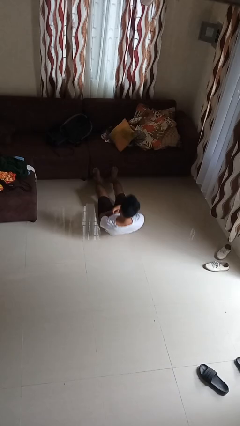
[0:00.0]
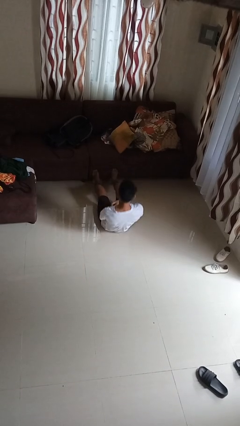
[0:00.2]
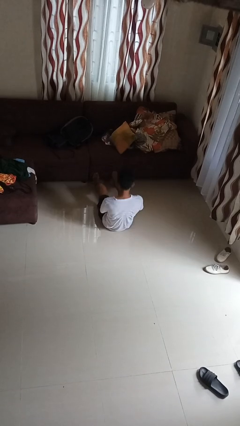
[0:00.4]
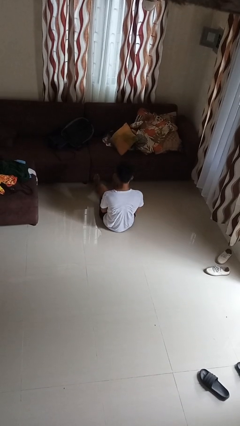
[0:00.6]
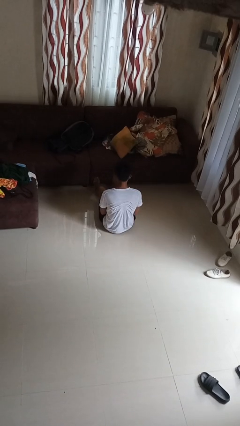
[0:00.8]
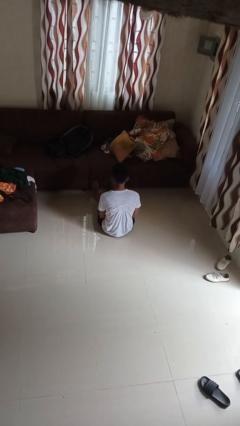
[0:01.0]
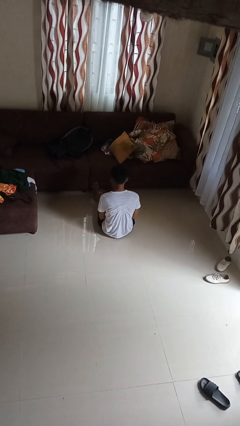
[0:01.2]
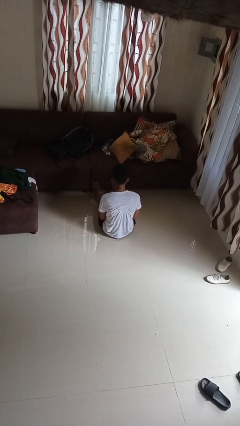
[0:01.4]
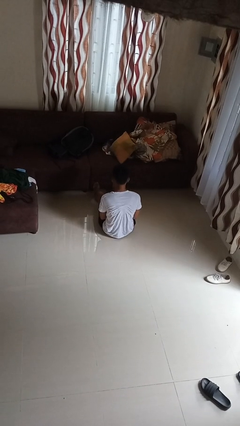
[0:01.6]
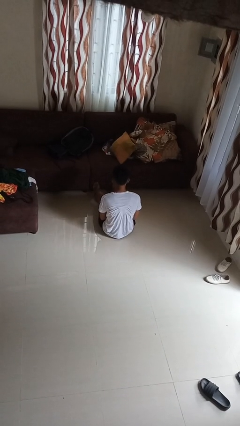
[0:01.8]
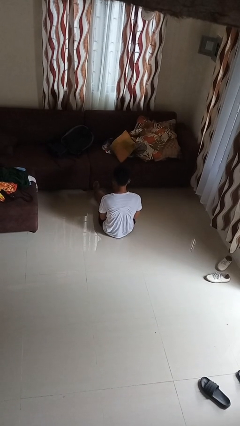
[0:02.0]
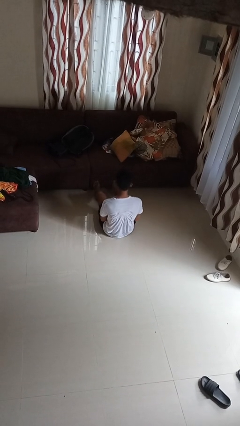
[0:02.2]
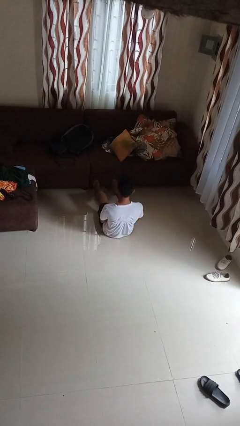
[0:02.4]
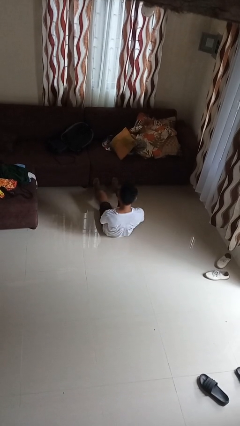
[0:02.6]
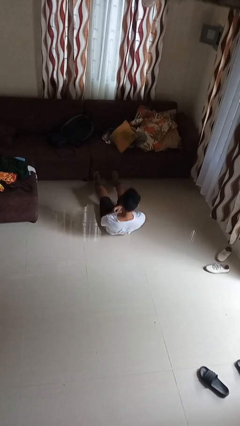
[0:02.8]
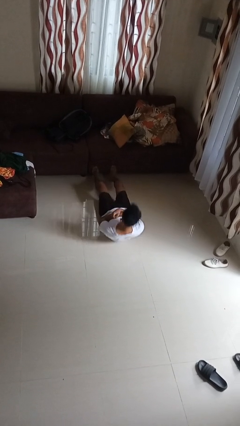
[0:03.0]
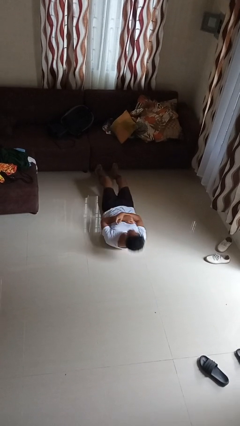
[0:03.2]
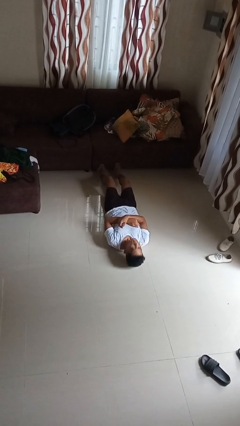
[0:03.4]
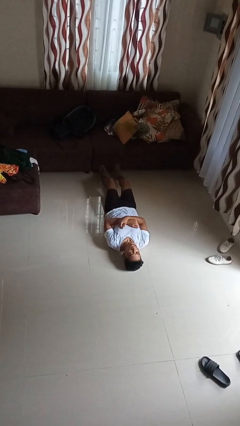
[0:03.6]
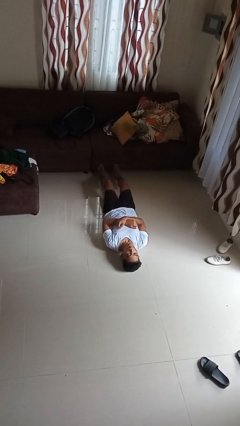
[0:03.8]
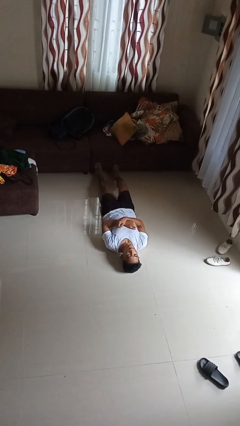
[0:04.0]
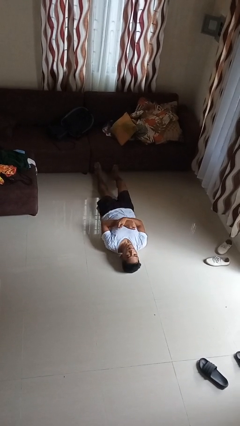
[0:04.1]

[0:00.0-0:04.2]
person exercises with situp

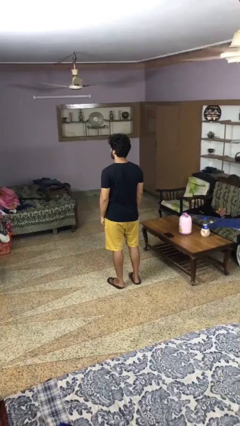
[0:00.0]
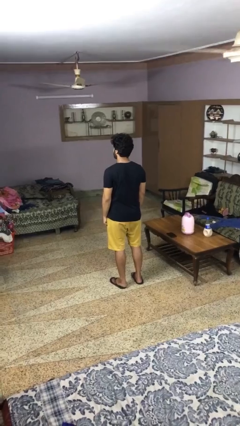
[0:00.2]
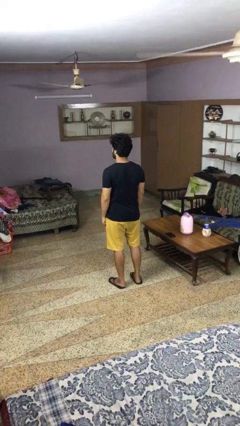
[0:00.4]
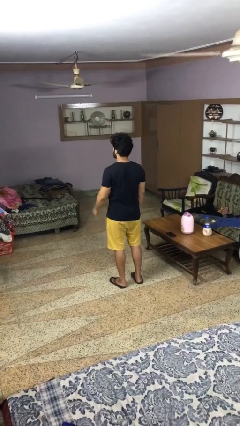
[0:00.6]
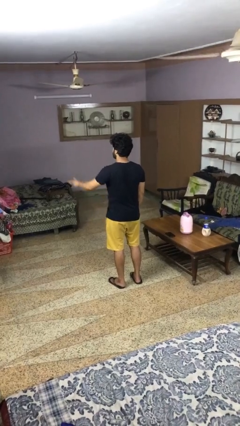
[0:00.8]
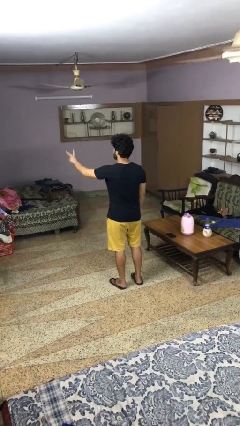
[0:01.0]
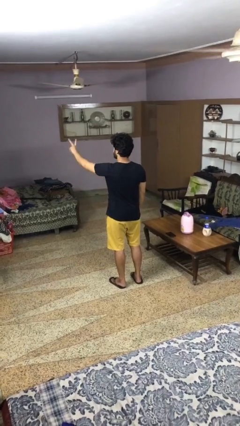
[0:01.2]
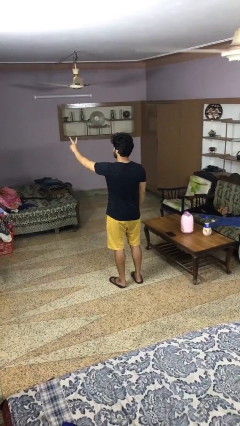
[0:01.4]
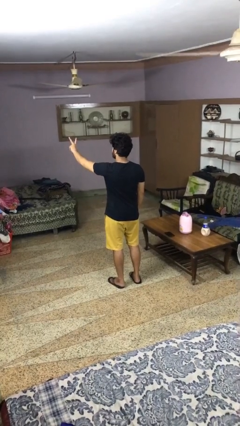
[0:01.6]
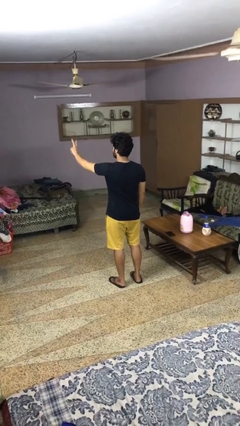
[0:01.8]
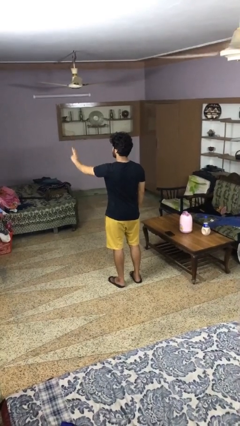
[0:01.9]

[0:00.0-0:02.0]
person gestures peace

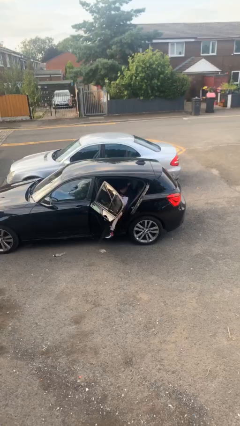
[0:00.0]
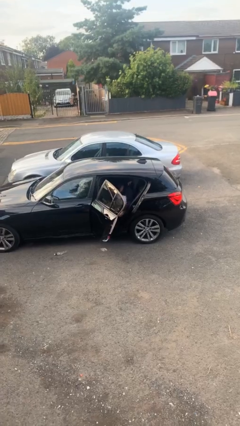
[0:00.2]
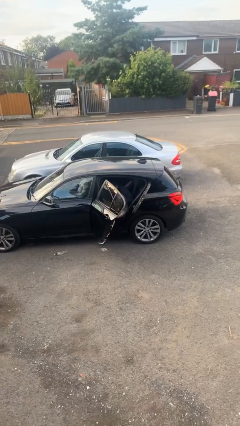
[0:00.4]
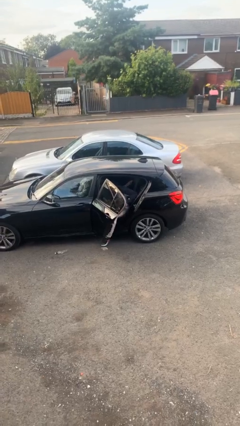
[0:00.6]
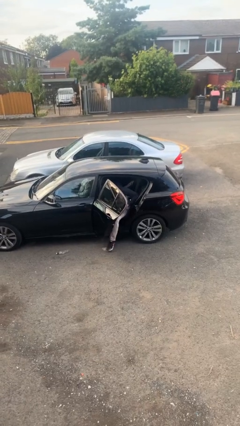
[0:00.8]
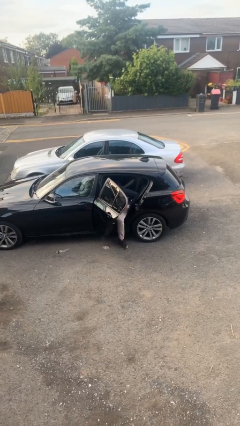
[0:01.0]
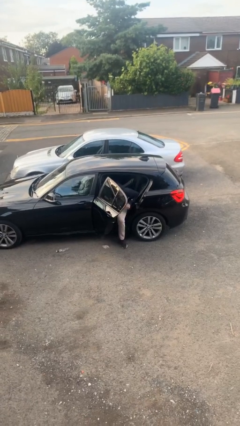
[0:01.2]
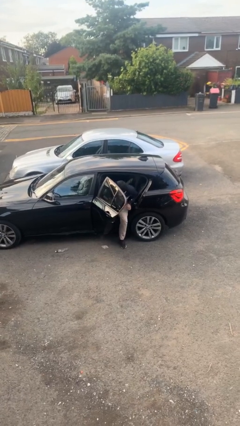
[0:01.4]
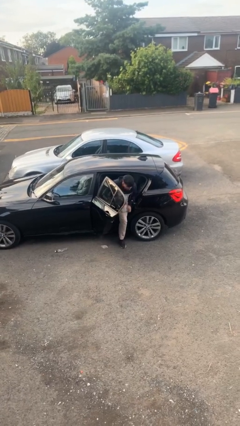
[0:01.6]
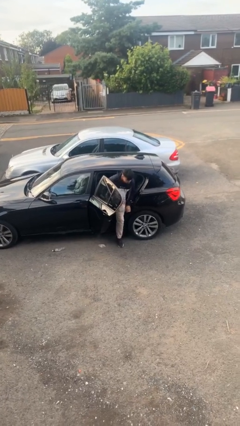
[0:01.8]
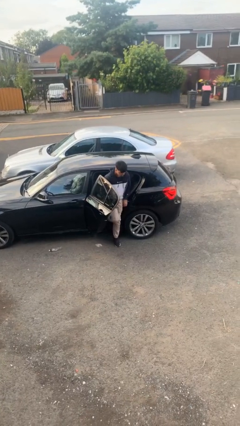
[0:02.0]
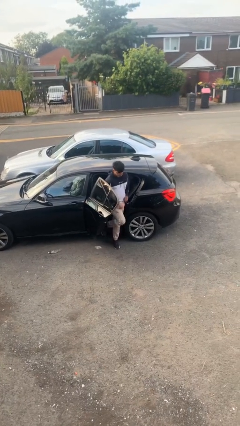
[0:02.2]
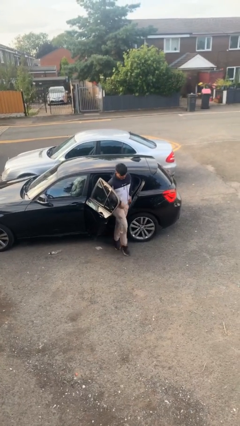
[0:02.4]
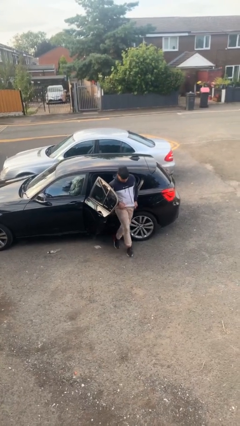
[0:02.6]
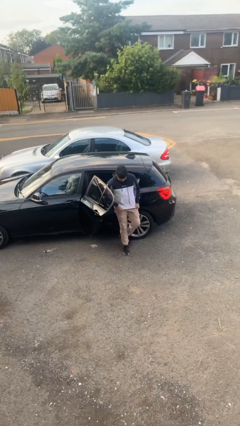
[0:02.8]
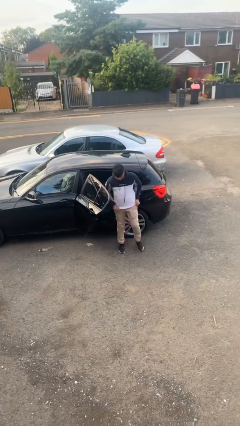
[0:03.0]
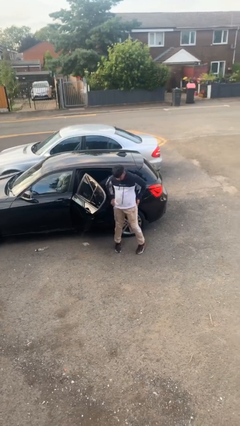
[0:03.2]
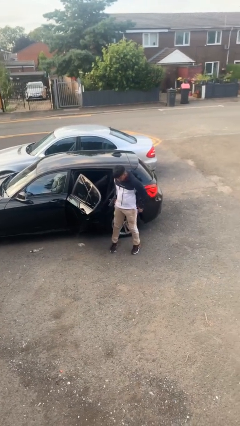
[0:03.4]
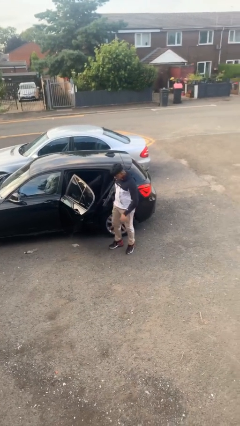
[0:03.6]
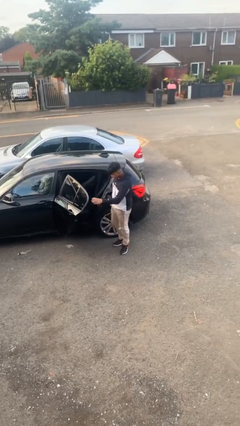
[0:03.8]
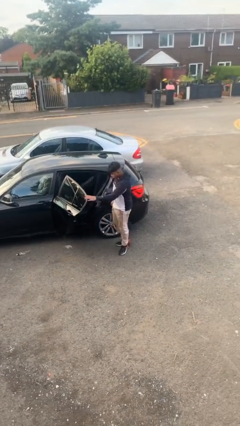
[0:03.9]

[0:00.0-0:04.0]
person exits car

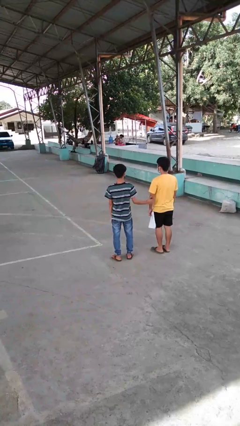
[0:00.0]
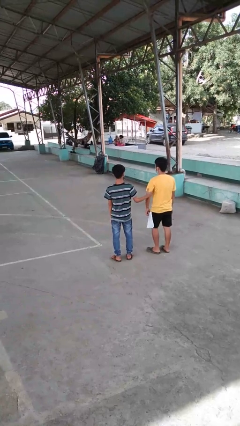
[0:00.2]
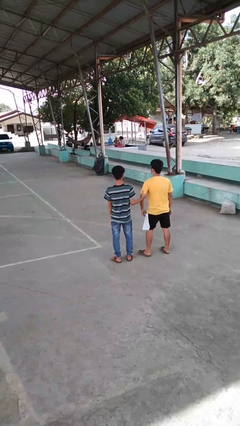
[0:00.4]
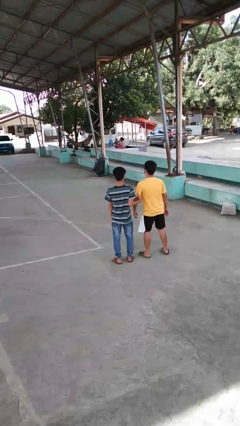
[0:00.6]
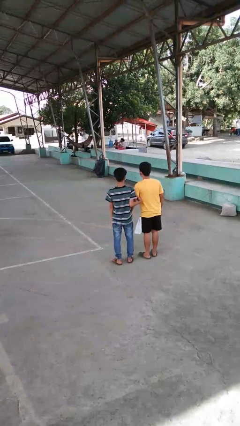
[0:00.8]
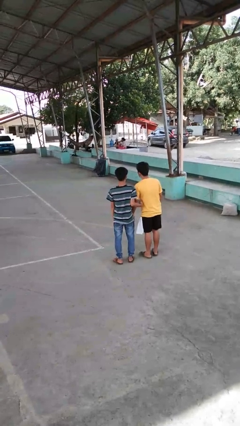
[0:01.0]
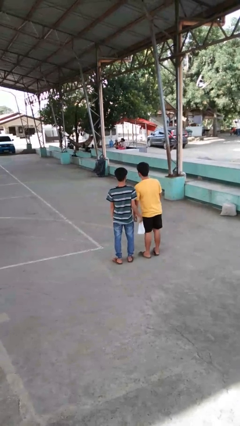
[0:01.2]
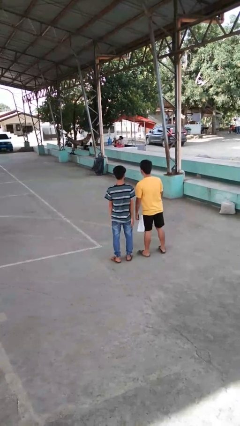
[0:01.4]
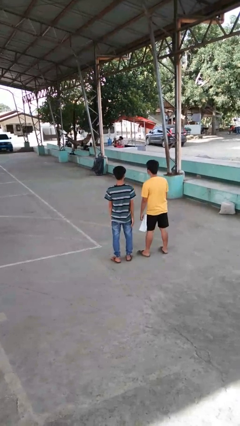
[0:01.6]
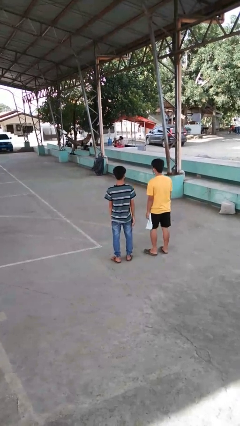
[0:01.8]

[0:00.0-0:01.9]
person grabs person by bicep

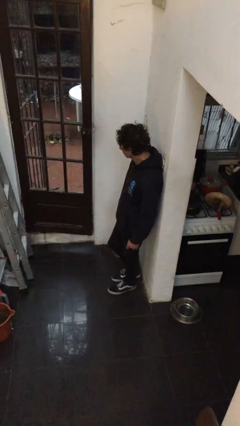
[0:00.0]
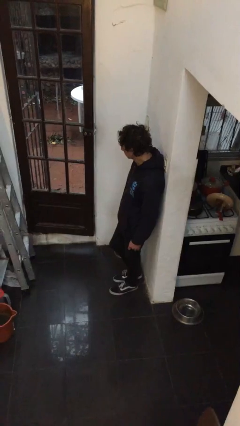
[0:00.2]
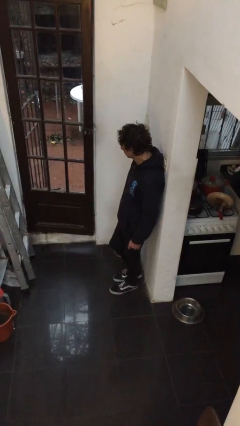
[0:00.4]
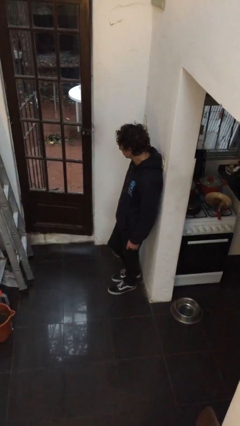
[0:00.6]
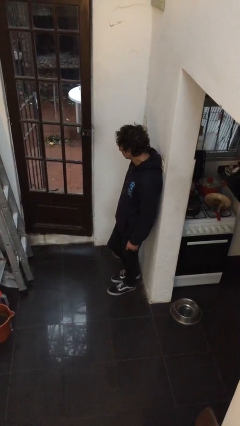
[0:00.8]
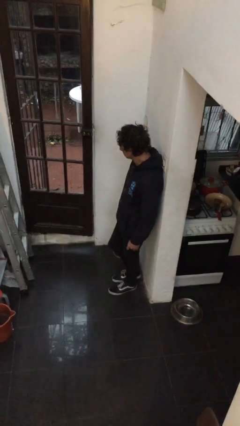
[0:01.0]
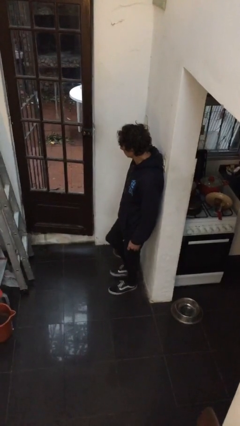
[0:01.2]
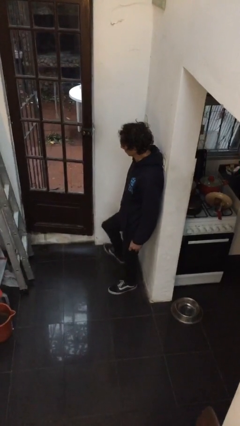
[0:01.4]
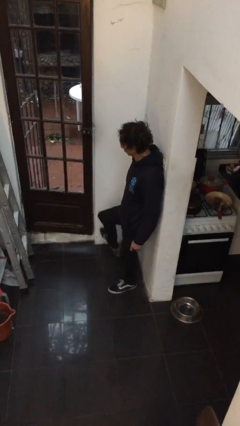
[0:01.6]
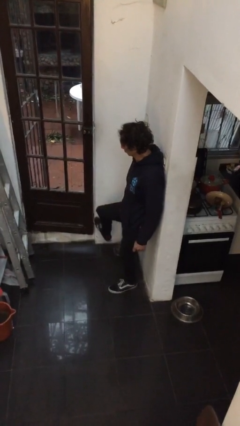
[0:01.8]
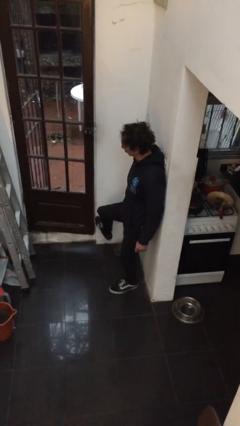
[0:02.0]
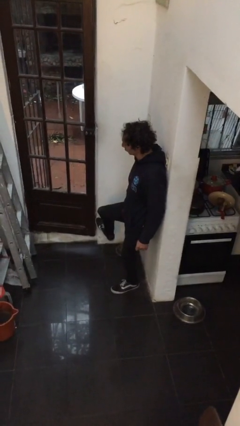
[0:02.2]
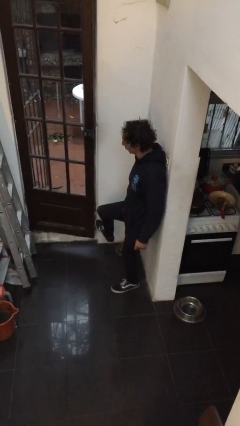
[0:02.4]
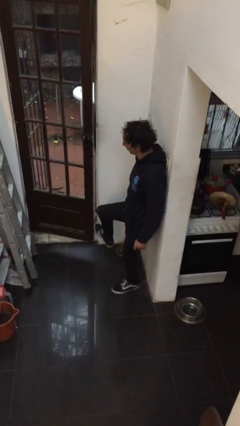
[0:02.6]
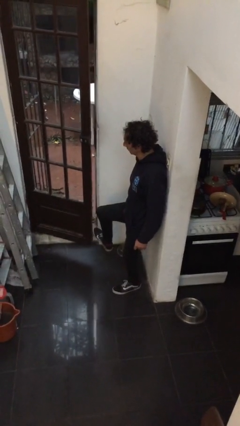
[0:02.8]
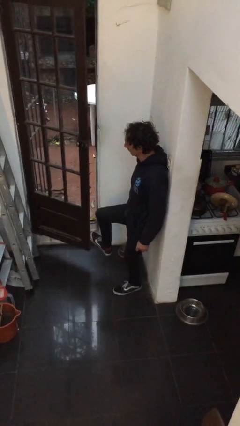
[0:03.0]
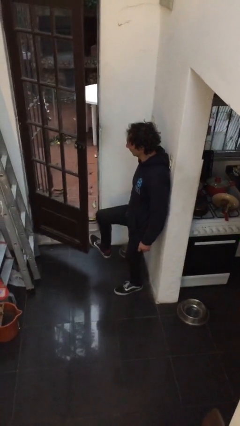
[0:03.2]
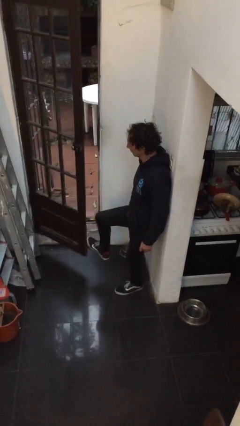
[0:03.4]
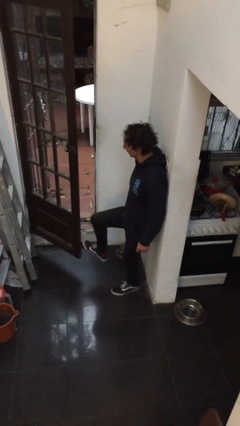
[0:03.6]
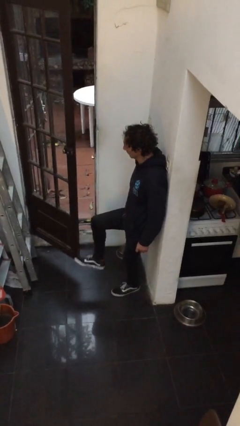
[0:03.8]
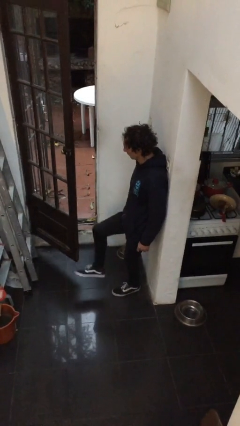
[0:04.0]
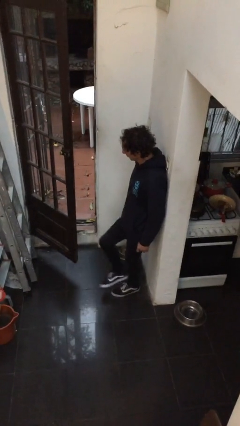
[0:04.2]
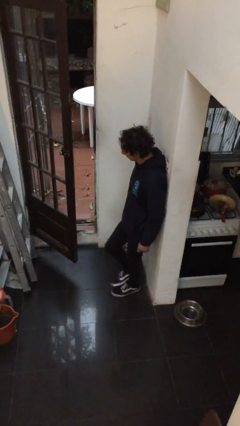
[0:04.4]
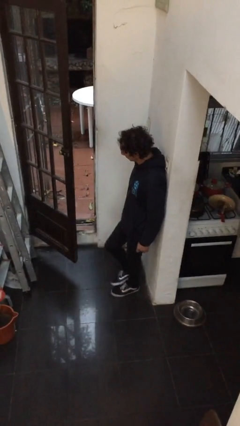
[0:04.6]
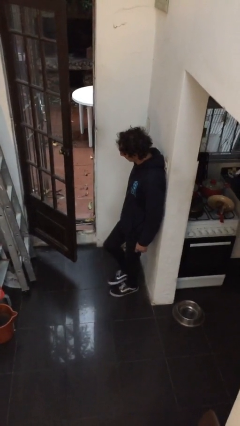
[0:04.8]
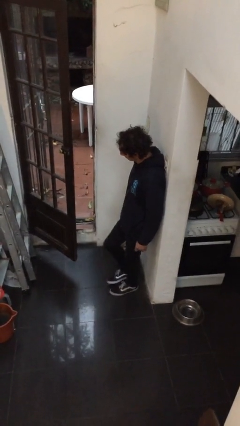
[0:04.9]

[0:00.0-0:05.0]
person opens facility door

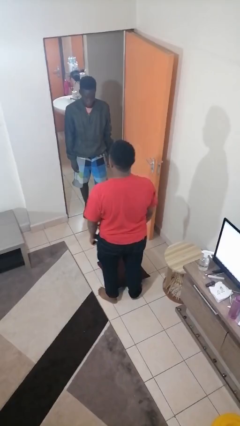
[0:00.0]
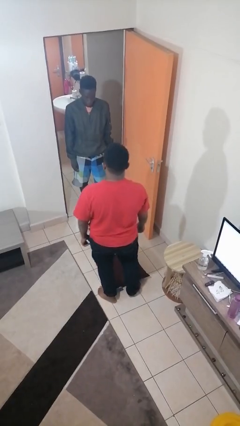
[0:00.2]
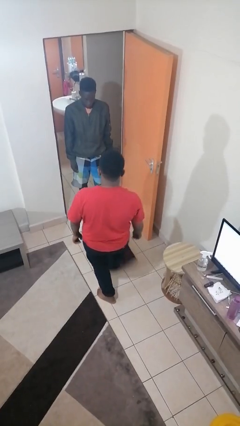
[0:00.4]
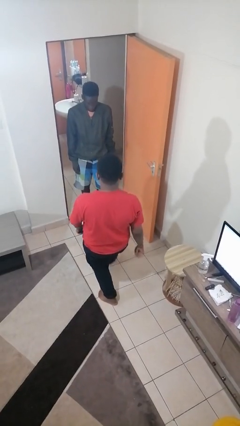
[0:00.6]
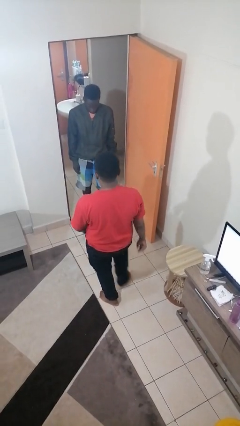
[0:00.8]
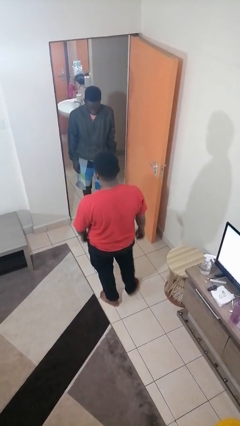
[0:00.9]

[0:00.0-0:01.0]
person kicks object to person
